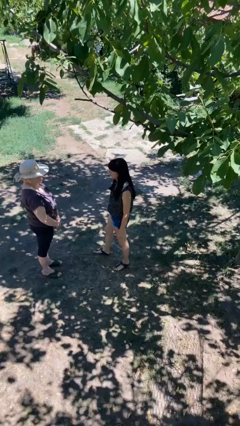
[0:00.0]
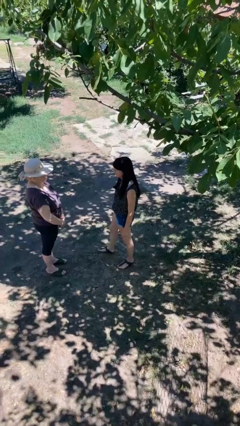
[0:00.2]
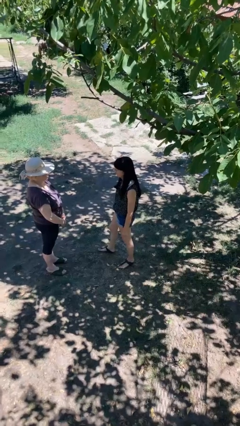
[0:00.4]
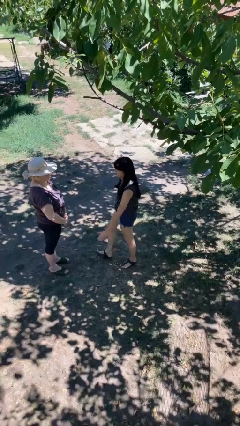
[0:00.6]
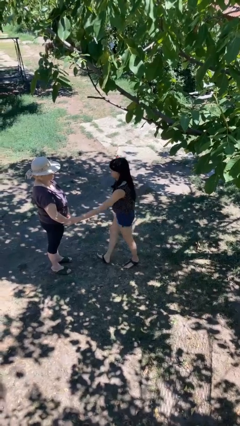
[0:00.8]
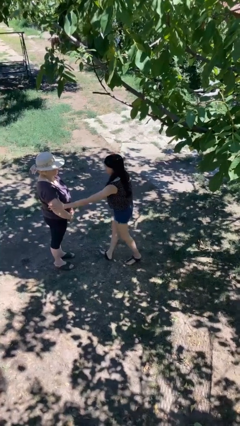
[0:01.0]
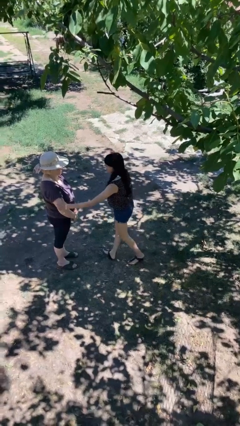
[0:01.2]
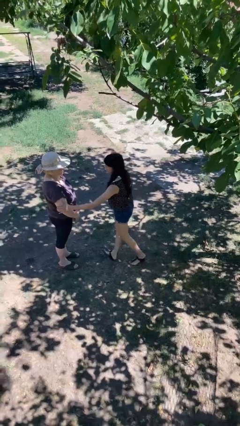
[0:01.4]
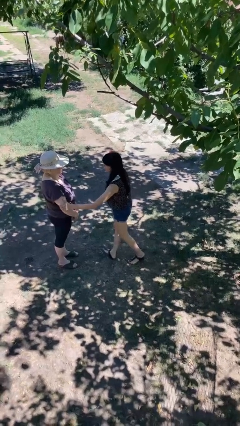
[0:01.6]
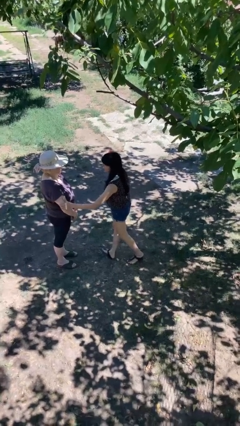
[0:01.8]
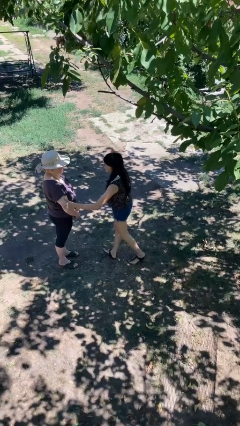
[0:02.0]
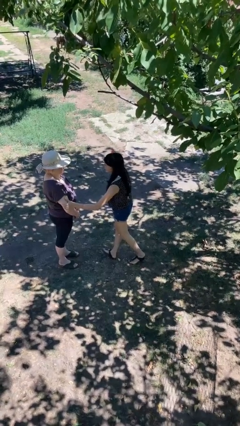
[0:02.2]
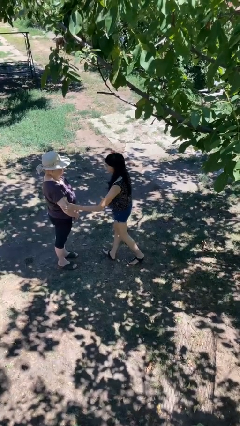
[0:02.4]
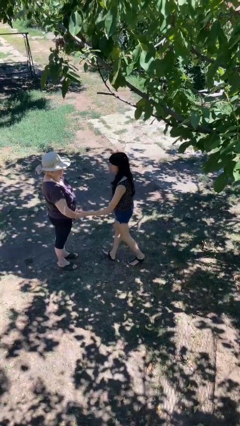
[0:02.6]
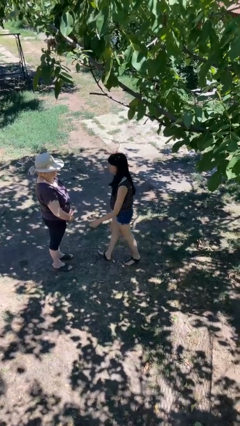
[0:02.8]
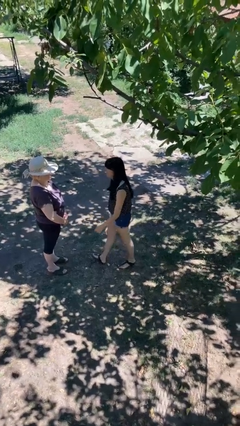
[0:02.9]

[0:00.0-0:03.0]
person grabs person by bicep

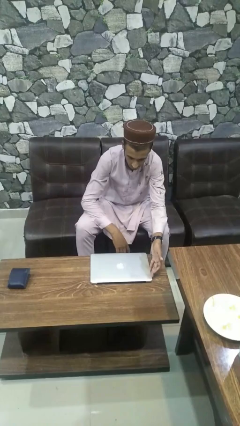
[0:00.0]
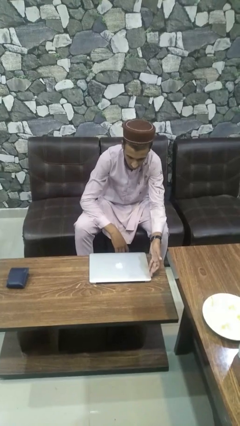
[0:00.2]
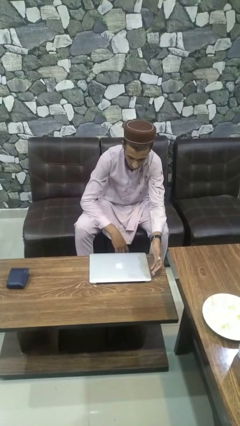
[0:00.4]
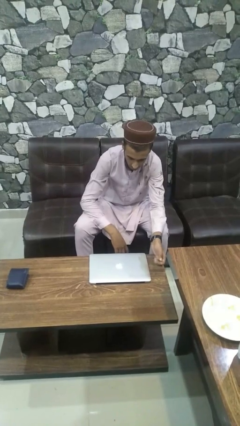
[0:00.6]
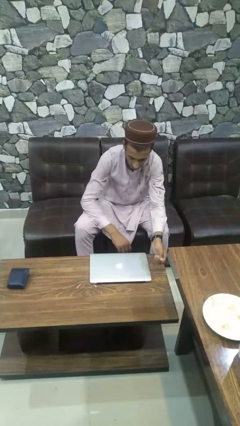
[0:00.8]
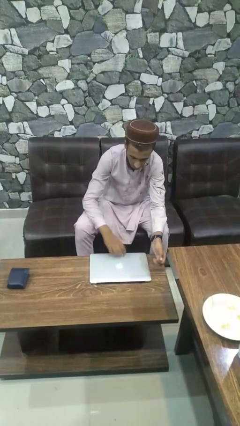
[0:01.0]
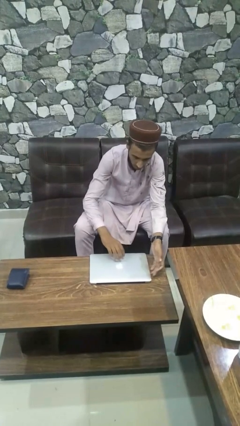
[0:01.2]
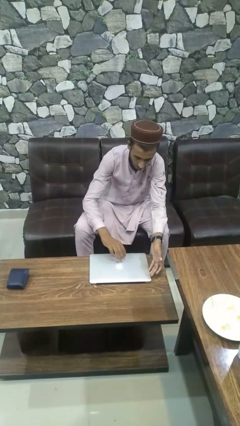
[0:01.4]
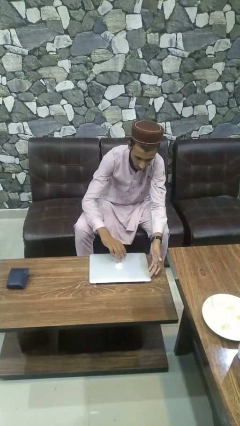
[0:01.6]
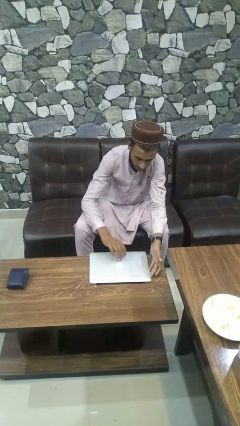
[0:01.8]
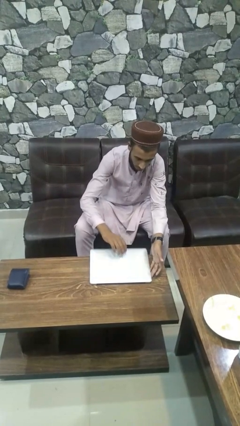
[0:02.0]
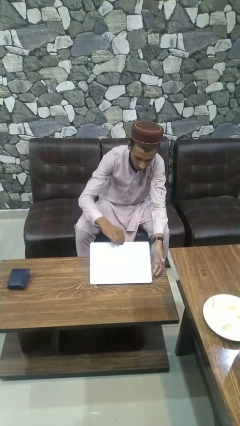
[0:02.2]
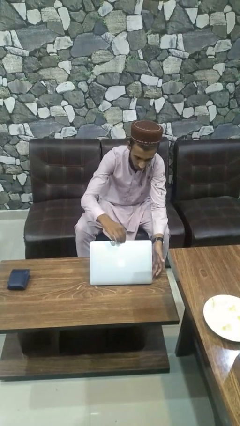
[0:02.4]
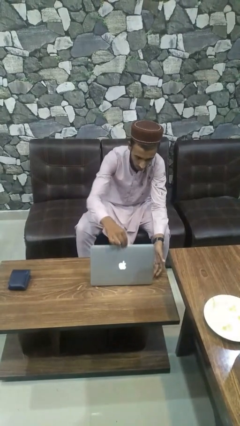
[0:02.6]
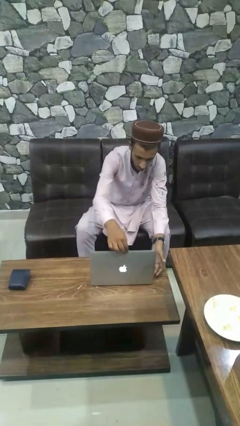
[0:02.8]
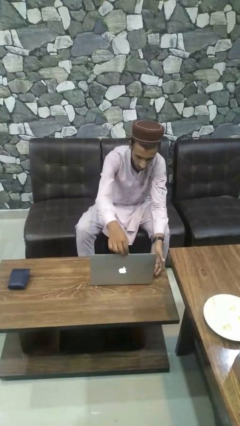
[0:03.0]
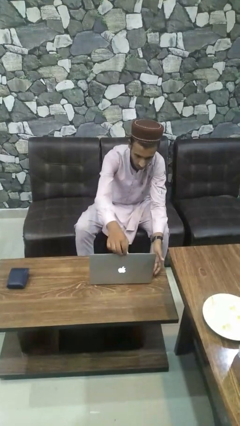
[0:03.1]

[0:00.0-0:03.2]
person opens laptop

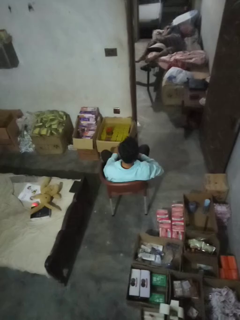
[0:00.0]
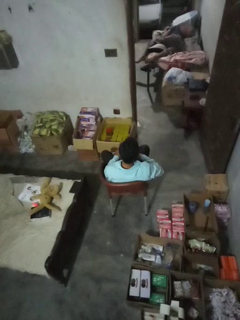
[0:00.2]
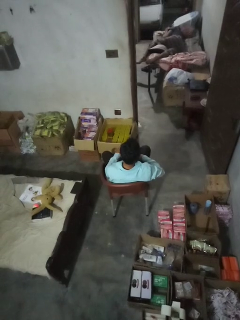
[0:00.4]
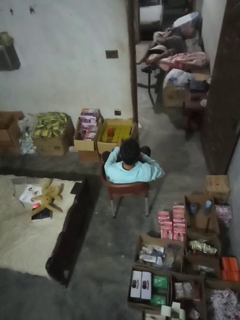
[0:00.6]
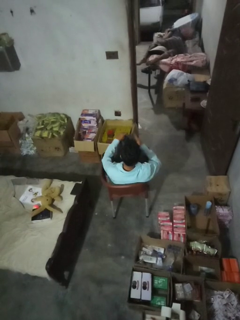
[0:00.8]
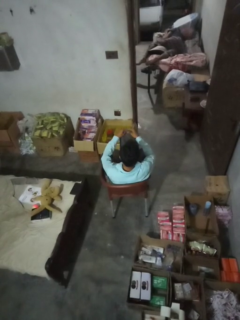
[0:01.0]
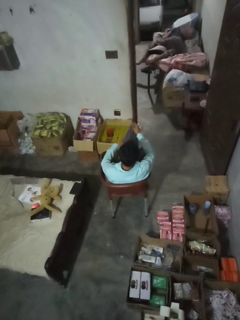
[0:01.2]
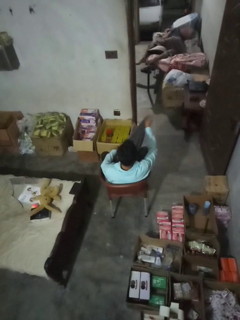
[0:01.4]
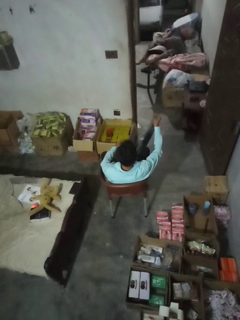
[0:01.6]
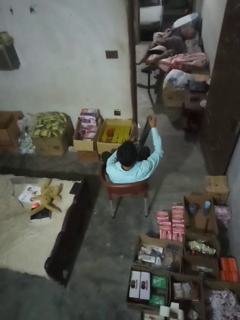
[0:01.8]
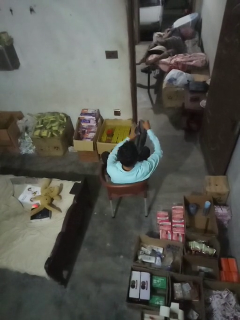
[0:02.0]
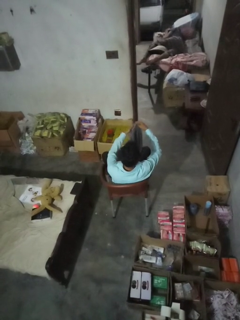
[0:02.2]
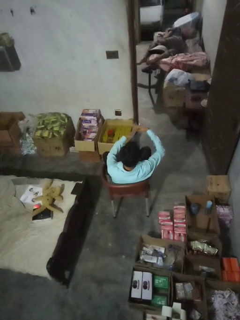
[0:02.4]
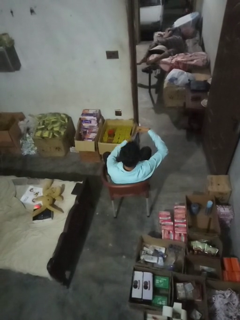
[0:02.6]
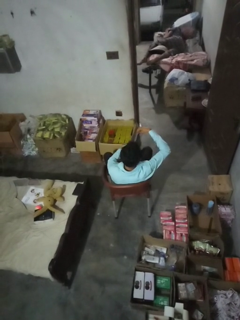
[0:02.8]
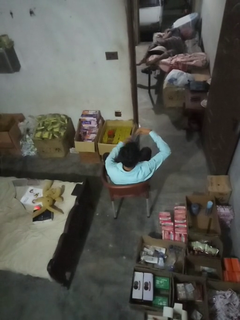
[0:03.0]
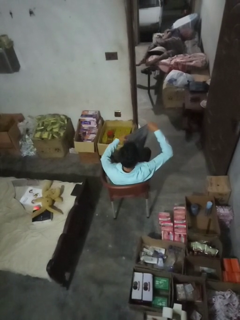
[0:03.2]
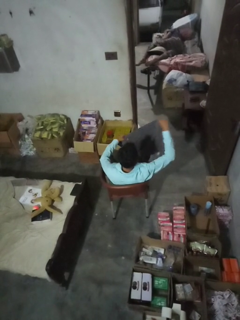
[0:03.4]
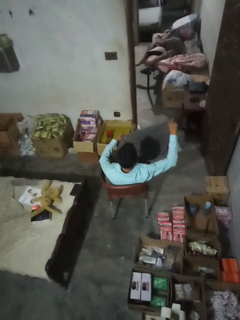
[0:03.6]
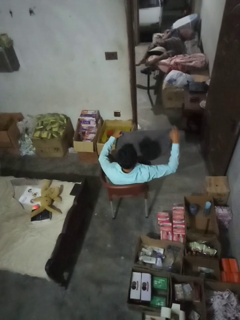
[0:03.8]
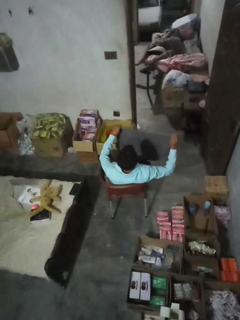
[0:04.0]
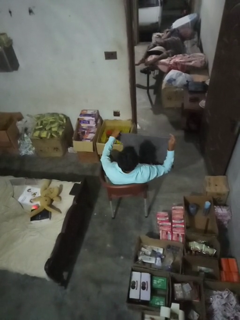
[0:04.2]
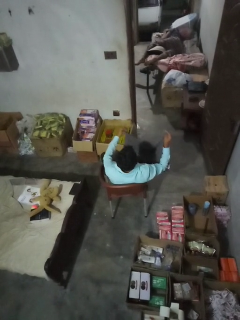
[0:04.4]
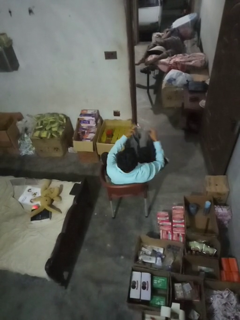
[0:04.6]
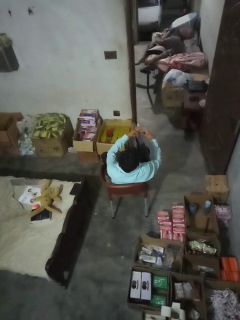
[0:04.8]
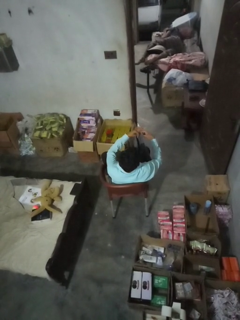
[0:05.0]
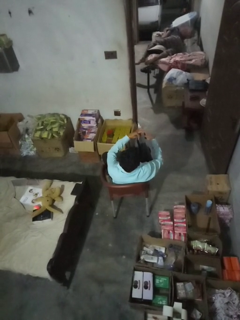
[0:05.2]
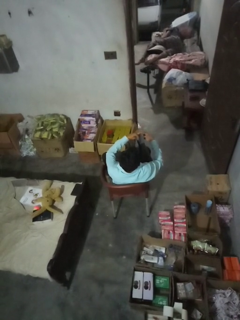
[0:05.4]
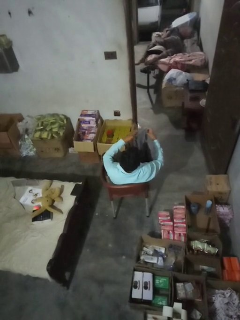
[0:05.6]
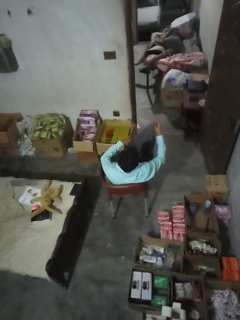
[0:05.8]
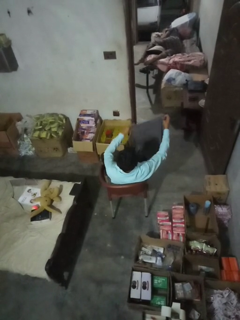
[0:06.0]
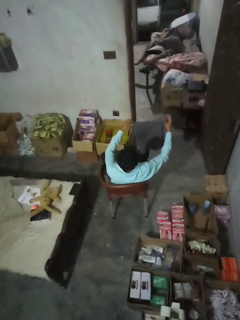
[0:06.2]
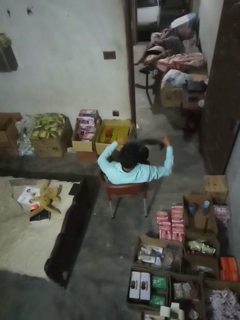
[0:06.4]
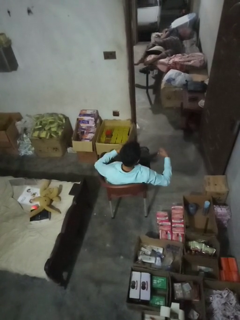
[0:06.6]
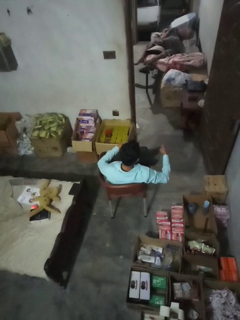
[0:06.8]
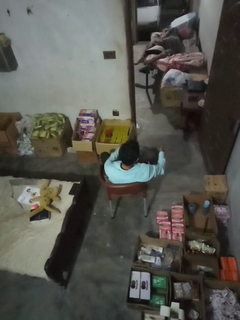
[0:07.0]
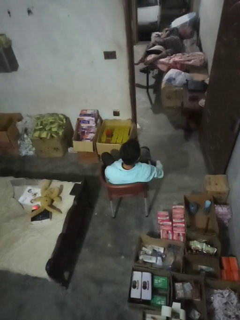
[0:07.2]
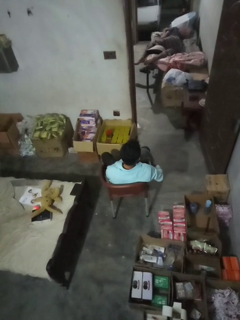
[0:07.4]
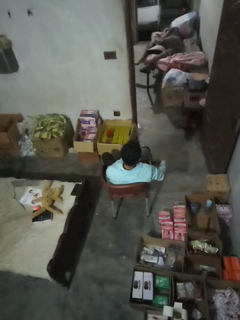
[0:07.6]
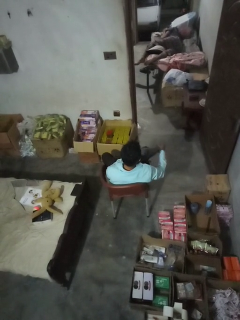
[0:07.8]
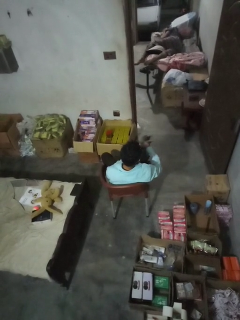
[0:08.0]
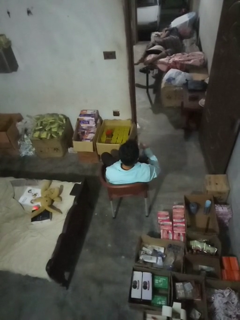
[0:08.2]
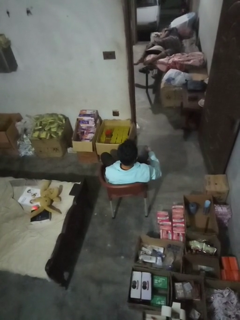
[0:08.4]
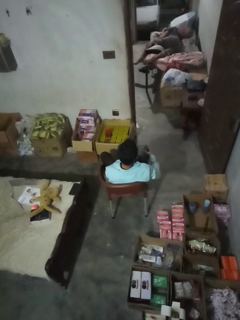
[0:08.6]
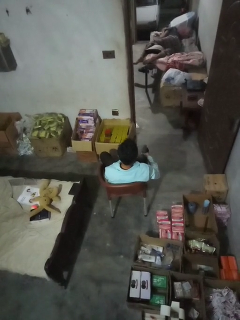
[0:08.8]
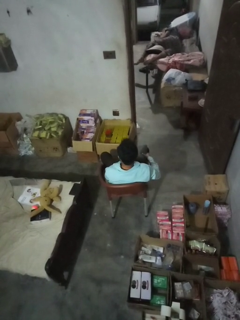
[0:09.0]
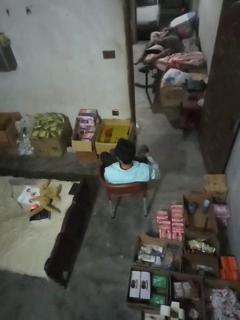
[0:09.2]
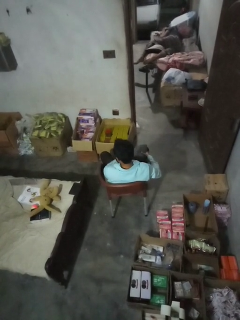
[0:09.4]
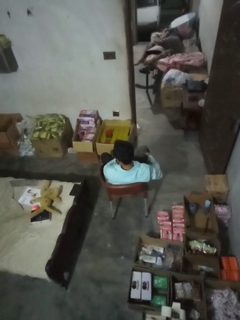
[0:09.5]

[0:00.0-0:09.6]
person folds towel

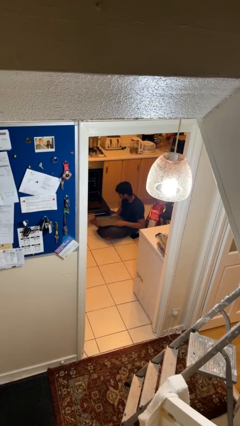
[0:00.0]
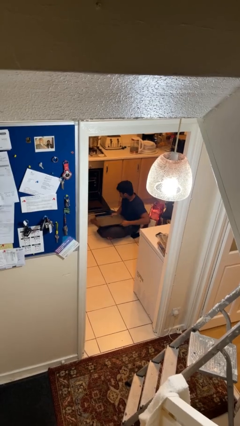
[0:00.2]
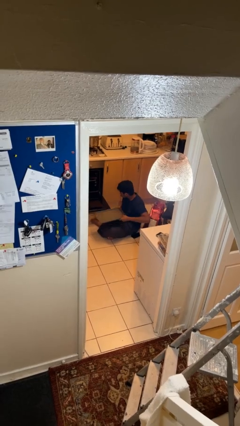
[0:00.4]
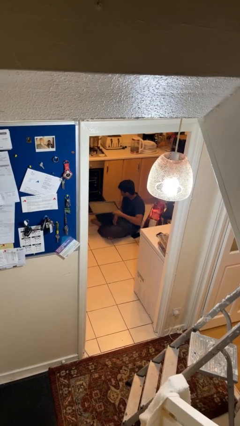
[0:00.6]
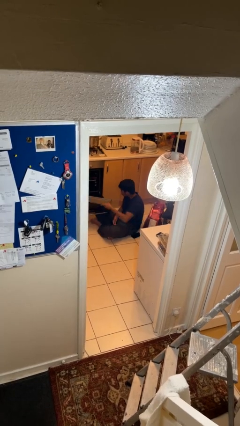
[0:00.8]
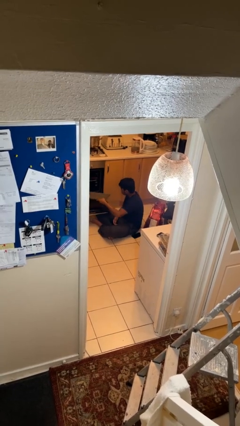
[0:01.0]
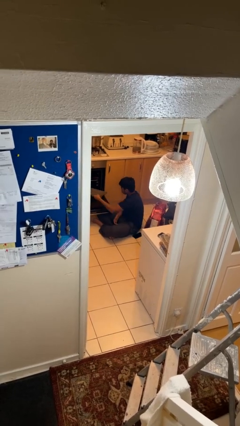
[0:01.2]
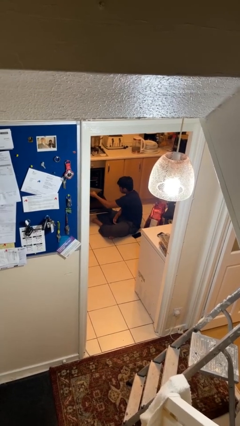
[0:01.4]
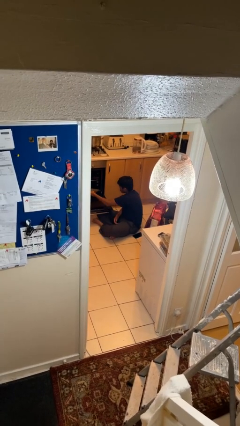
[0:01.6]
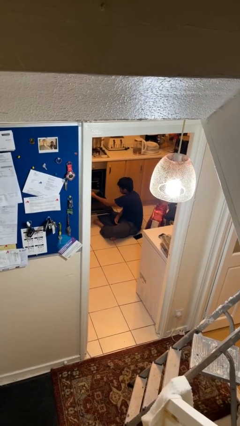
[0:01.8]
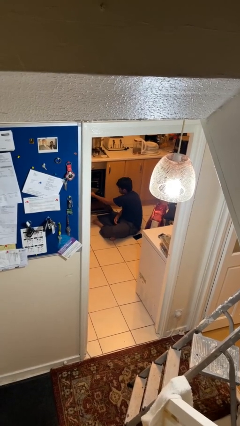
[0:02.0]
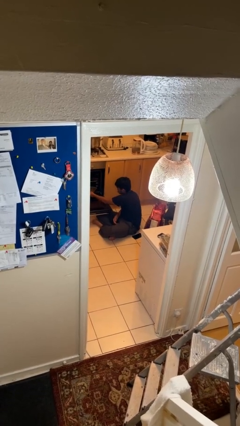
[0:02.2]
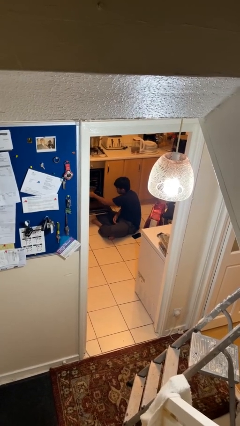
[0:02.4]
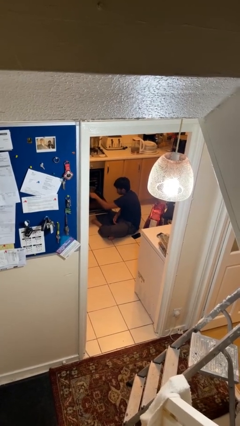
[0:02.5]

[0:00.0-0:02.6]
person puts object into oven

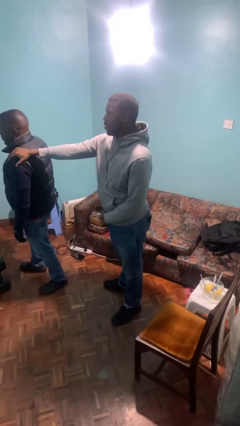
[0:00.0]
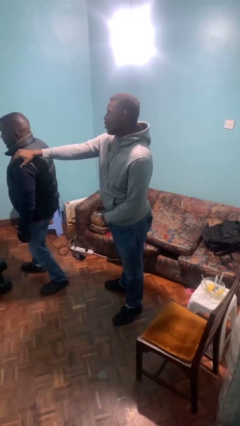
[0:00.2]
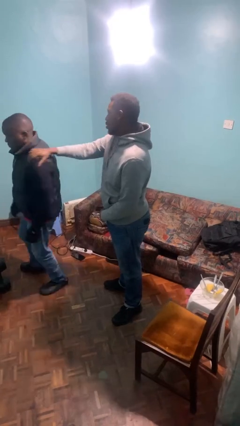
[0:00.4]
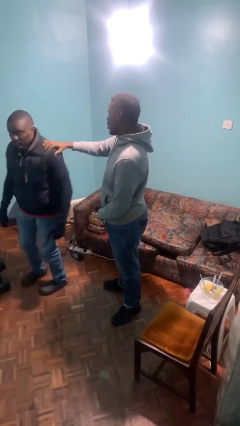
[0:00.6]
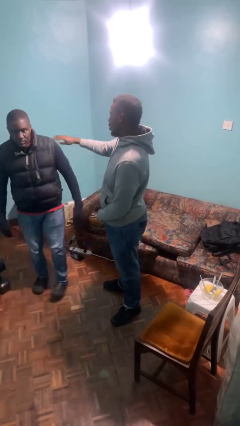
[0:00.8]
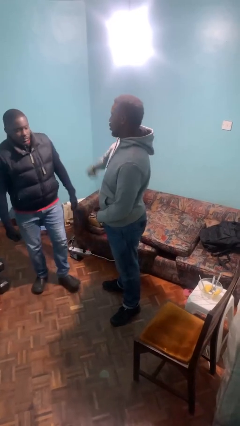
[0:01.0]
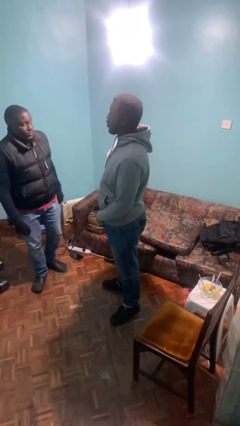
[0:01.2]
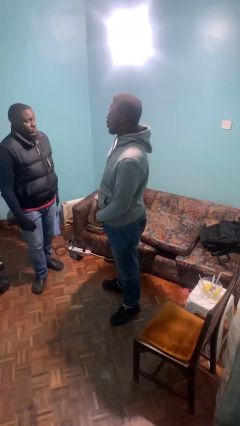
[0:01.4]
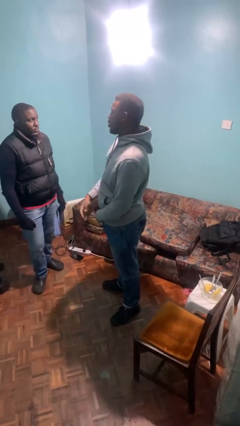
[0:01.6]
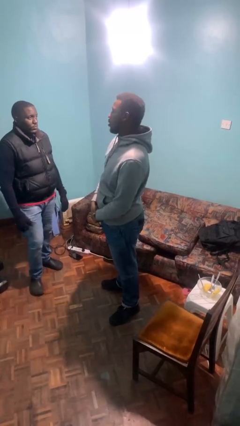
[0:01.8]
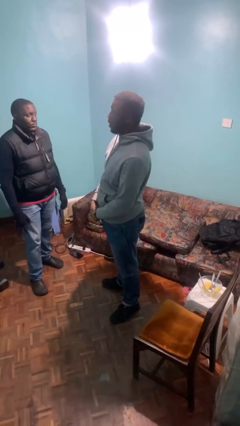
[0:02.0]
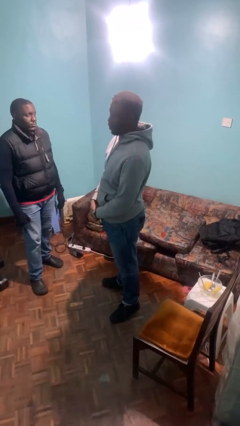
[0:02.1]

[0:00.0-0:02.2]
person spins person around
